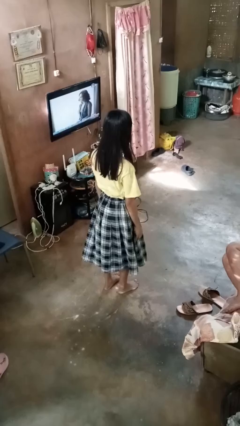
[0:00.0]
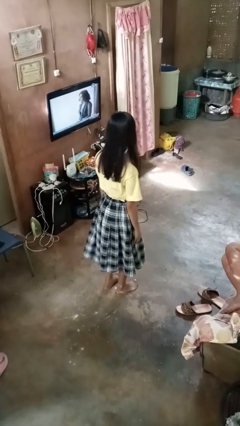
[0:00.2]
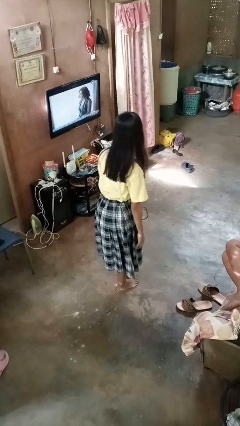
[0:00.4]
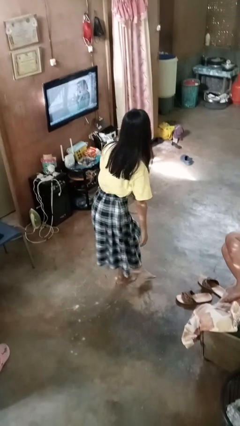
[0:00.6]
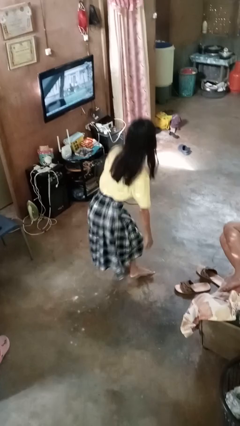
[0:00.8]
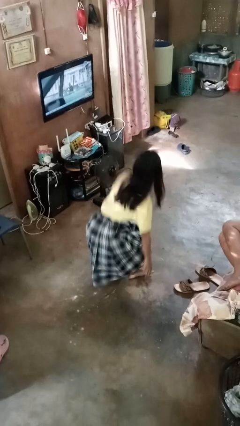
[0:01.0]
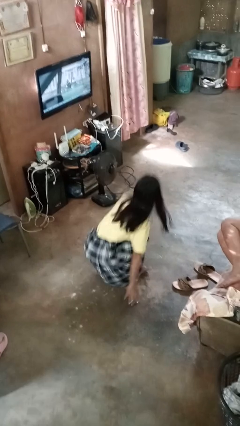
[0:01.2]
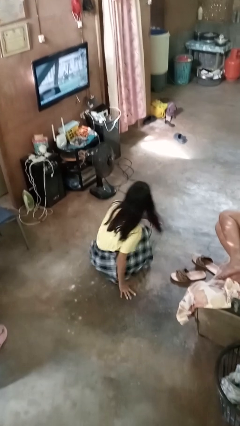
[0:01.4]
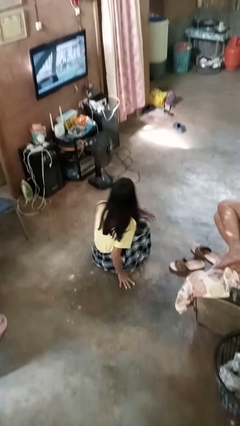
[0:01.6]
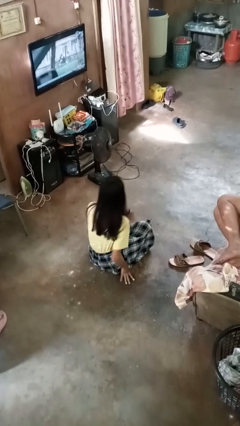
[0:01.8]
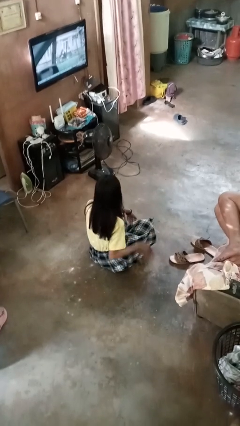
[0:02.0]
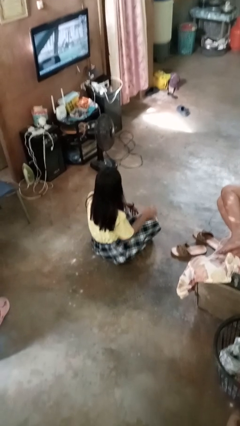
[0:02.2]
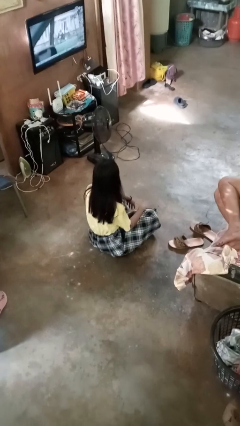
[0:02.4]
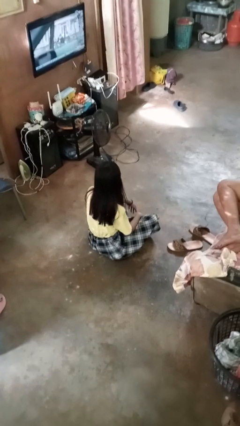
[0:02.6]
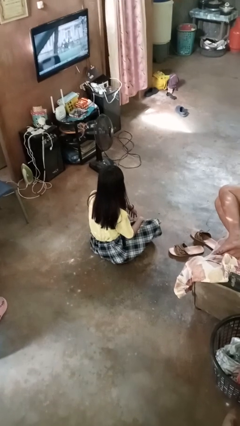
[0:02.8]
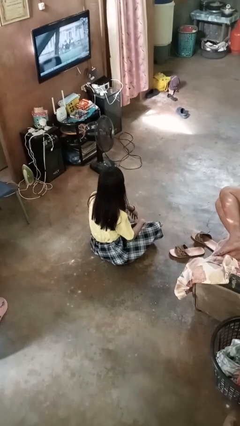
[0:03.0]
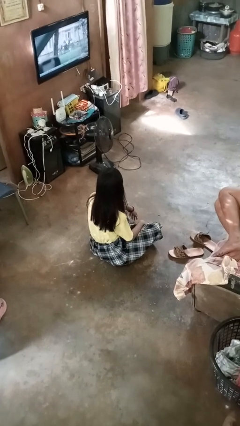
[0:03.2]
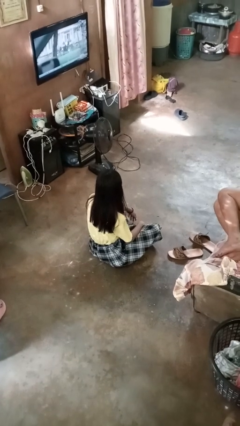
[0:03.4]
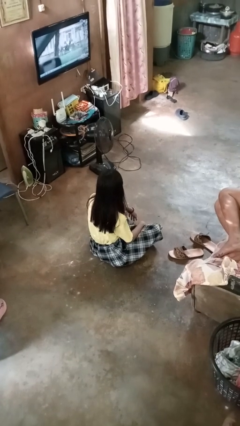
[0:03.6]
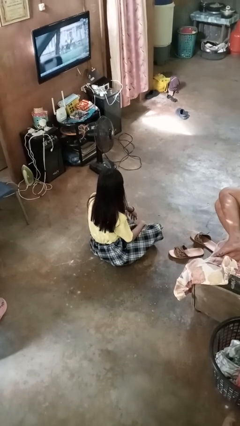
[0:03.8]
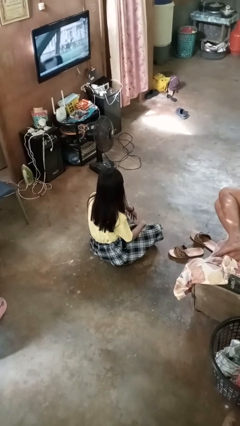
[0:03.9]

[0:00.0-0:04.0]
person sits crisscross

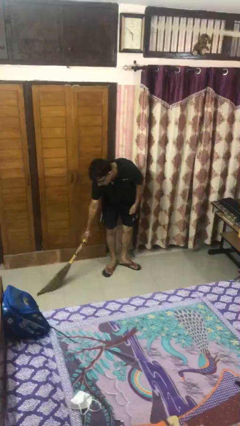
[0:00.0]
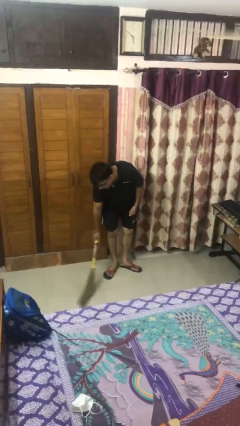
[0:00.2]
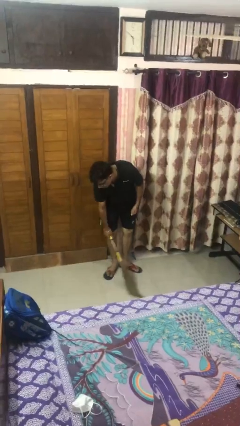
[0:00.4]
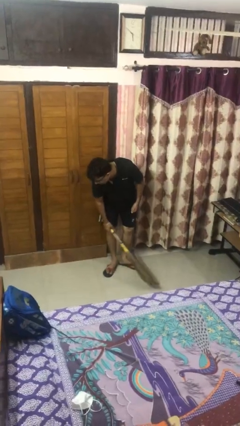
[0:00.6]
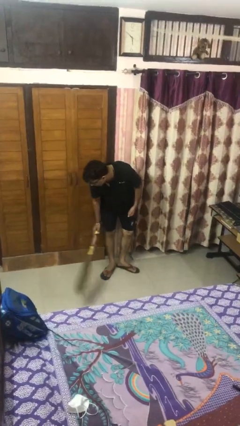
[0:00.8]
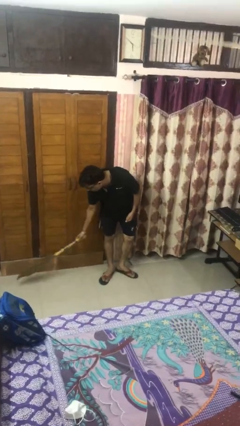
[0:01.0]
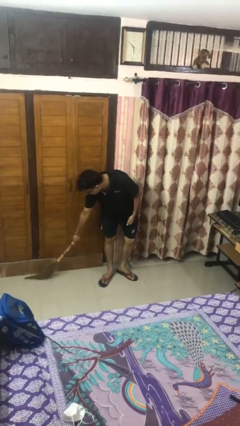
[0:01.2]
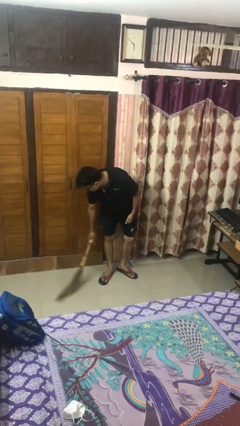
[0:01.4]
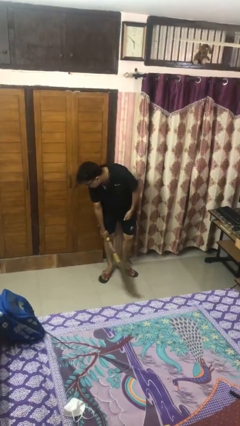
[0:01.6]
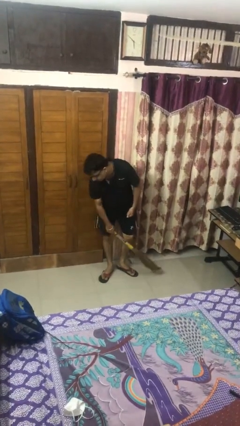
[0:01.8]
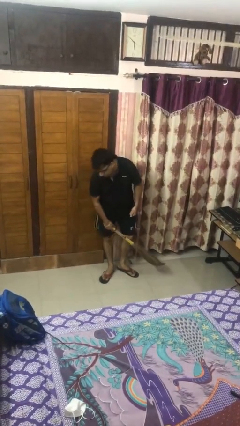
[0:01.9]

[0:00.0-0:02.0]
person sweeps floor

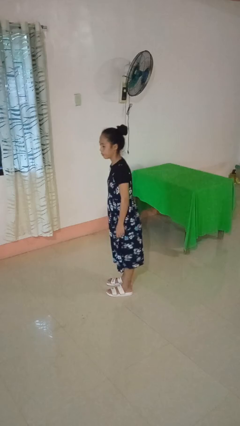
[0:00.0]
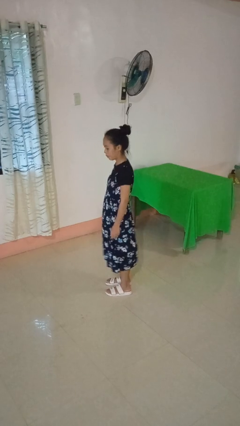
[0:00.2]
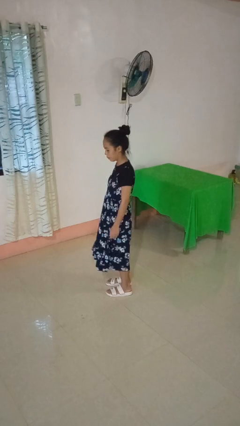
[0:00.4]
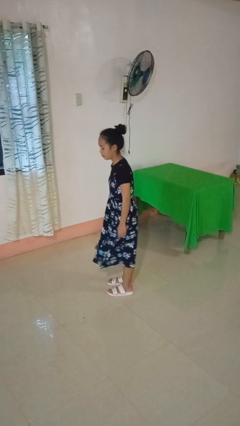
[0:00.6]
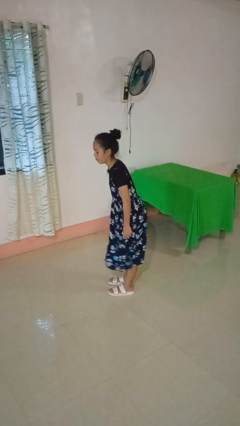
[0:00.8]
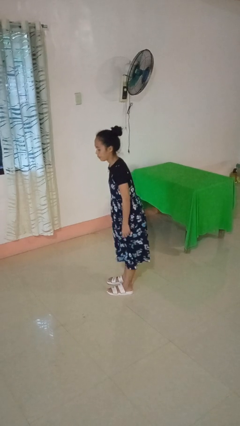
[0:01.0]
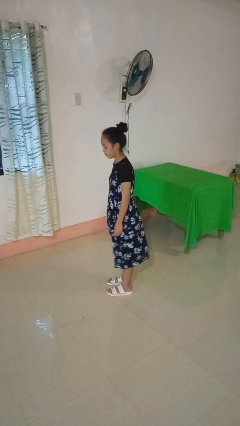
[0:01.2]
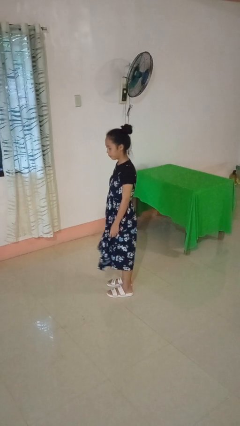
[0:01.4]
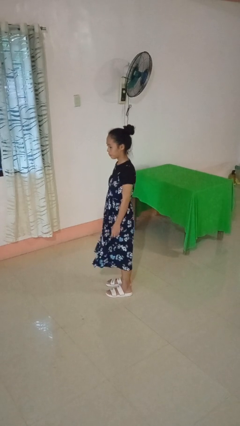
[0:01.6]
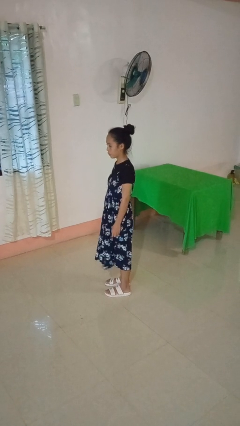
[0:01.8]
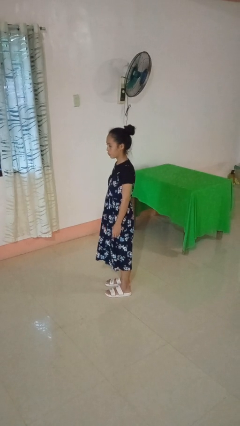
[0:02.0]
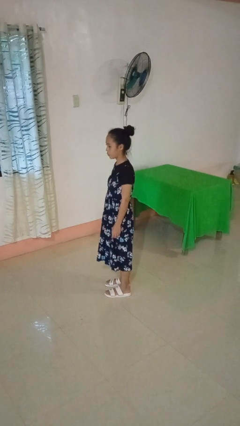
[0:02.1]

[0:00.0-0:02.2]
person wiggles hips

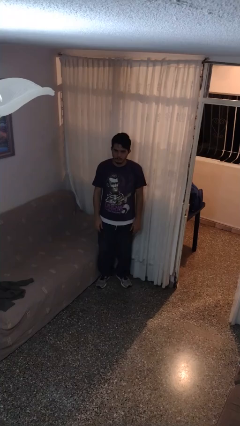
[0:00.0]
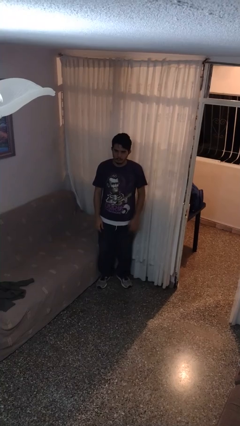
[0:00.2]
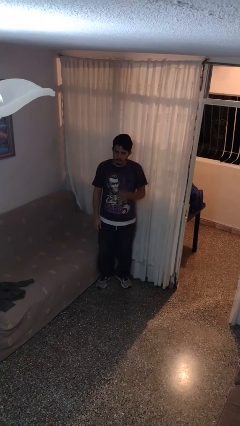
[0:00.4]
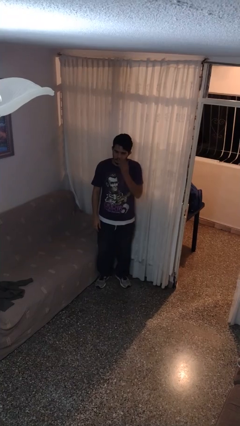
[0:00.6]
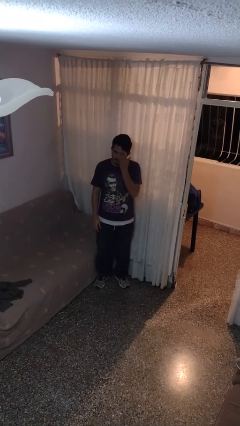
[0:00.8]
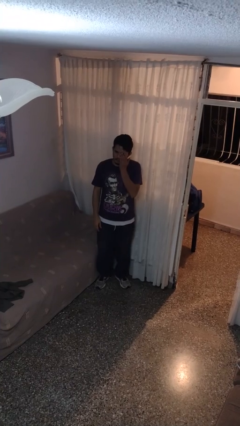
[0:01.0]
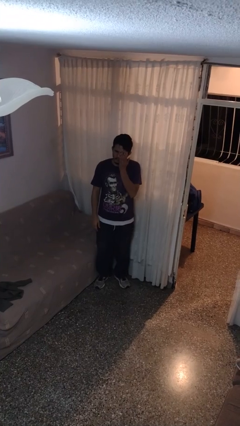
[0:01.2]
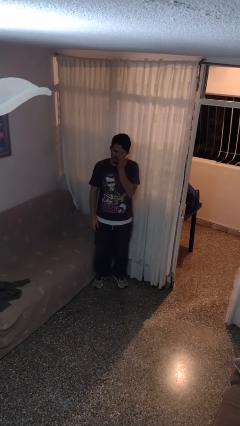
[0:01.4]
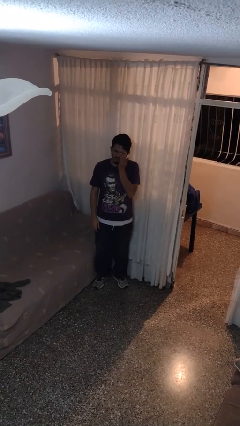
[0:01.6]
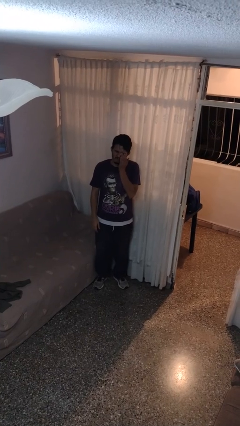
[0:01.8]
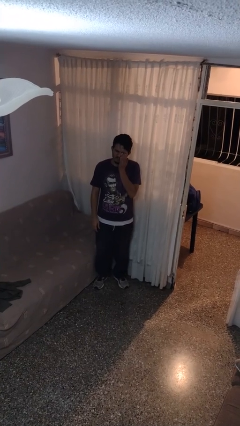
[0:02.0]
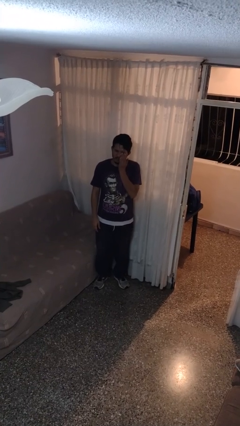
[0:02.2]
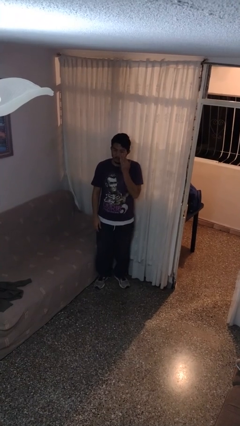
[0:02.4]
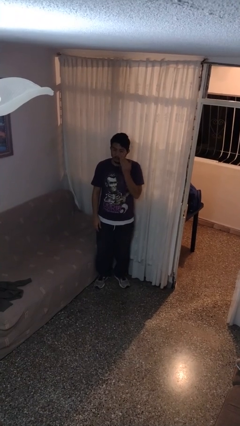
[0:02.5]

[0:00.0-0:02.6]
person rubs eyes

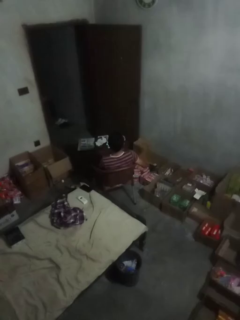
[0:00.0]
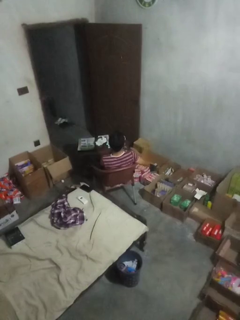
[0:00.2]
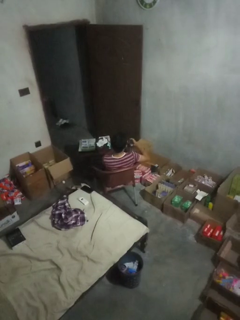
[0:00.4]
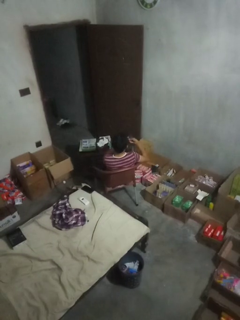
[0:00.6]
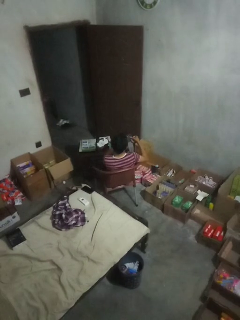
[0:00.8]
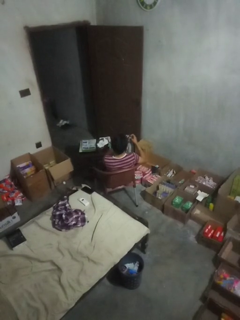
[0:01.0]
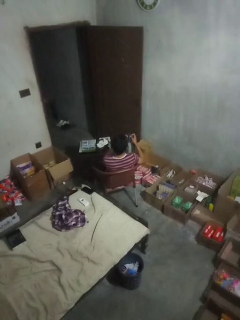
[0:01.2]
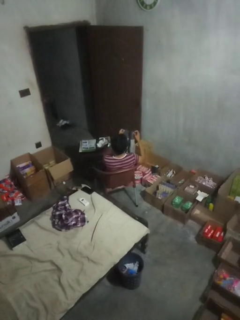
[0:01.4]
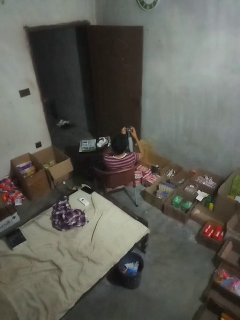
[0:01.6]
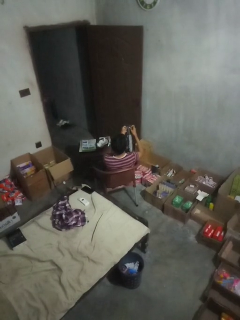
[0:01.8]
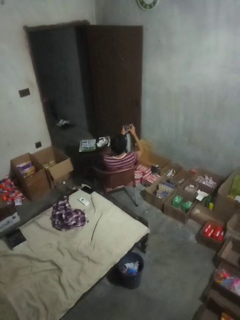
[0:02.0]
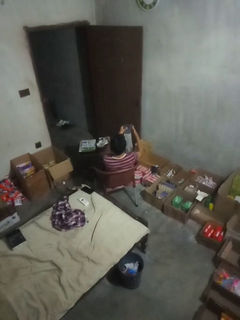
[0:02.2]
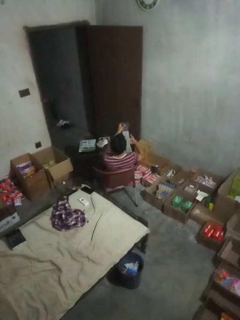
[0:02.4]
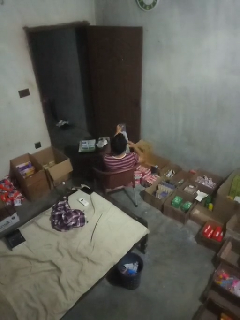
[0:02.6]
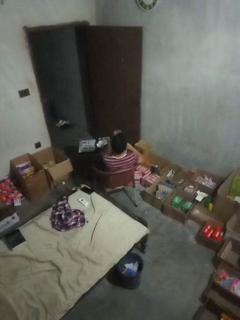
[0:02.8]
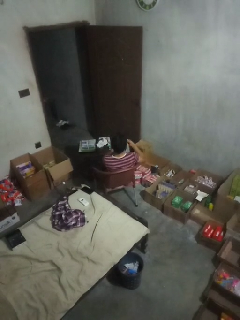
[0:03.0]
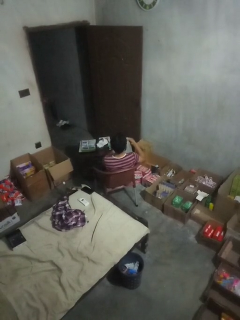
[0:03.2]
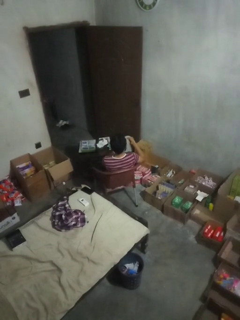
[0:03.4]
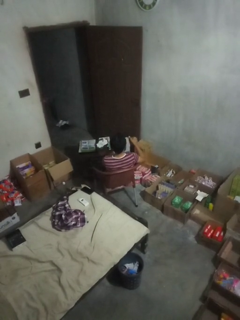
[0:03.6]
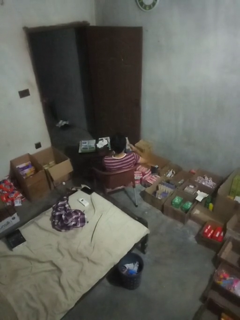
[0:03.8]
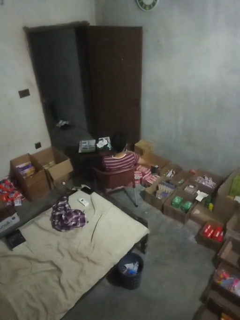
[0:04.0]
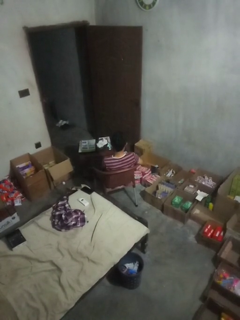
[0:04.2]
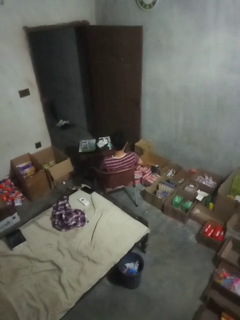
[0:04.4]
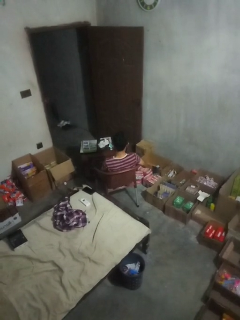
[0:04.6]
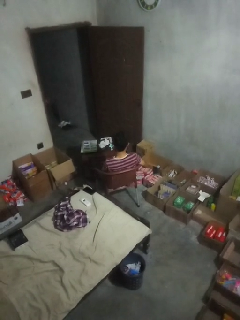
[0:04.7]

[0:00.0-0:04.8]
person folds socks

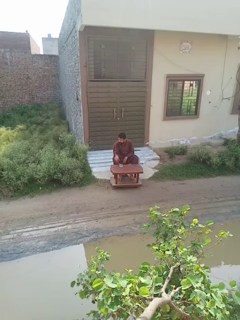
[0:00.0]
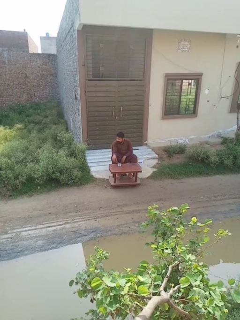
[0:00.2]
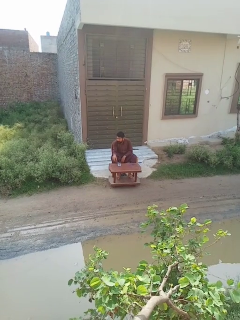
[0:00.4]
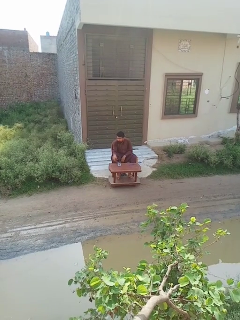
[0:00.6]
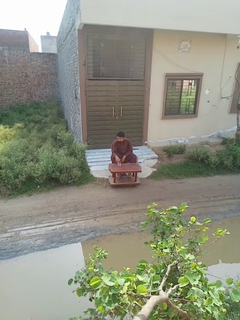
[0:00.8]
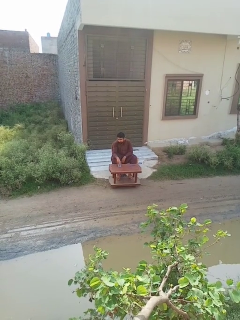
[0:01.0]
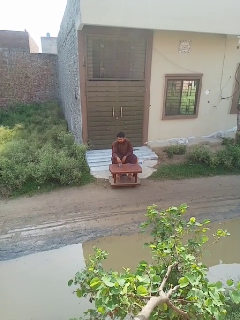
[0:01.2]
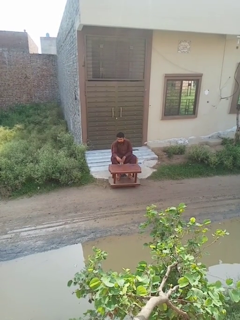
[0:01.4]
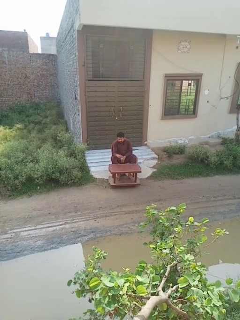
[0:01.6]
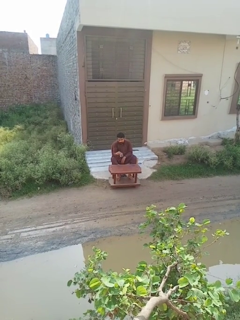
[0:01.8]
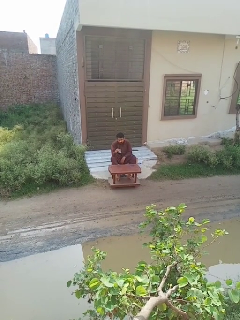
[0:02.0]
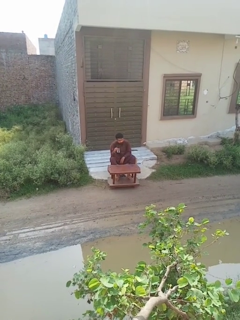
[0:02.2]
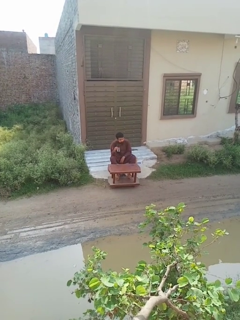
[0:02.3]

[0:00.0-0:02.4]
person picks up object from table

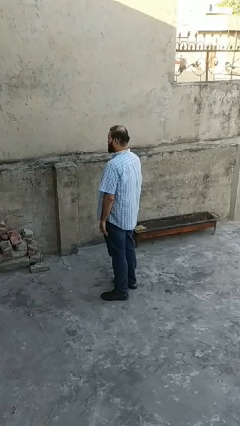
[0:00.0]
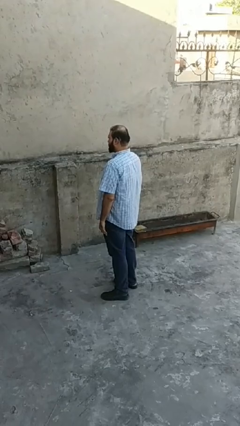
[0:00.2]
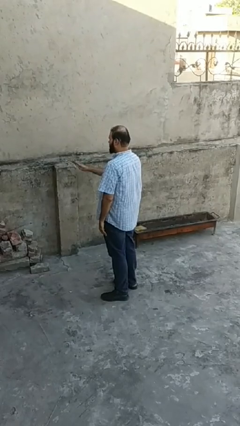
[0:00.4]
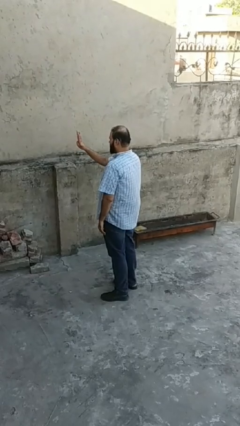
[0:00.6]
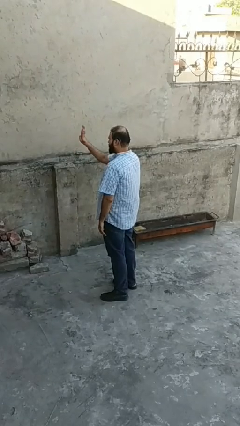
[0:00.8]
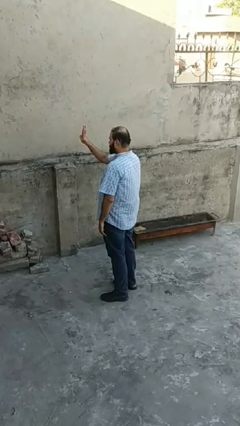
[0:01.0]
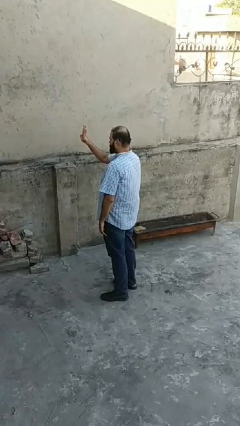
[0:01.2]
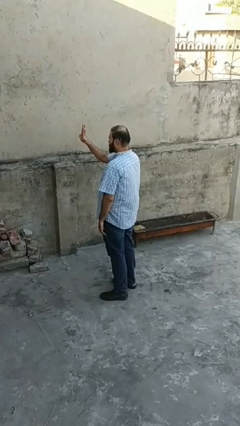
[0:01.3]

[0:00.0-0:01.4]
person gestures number four
